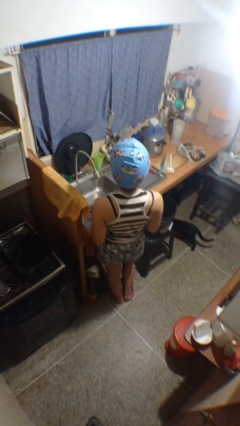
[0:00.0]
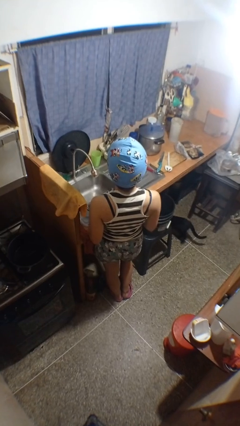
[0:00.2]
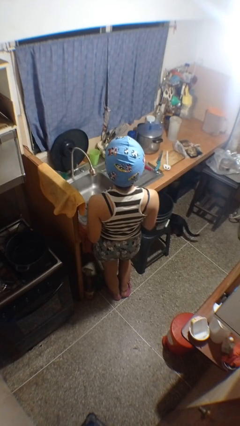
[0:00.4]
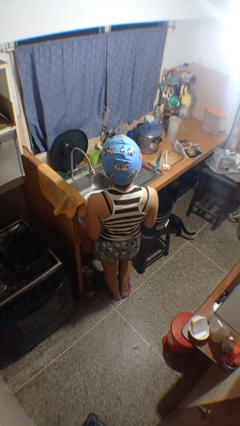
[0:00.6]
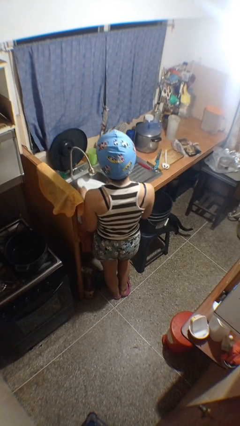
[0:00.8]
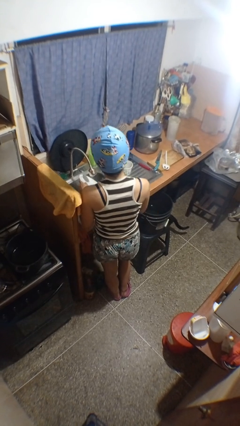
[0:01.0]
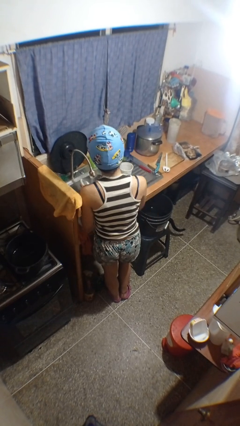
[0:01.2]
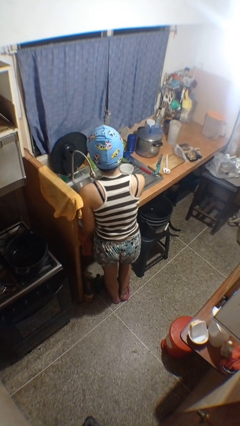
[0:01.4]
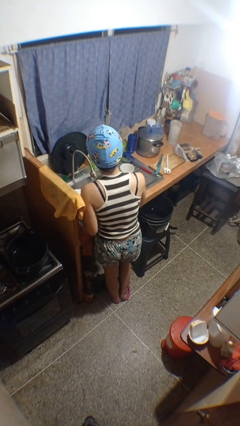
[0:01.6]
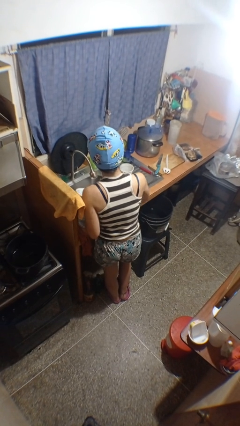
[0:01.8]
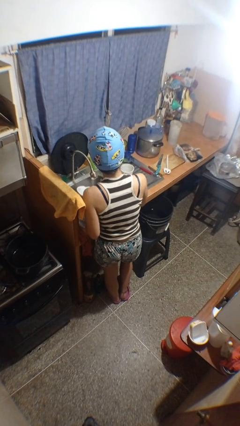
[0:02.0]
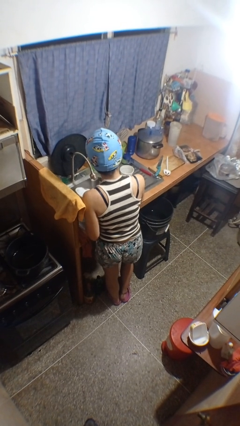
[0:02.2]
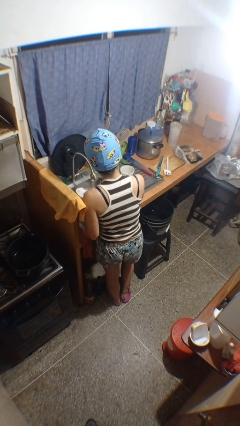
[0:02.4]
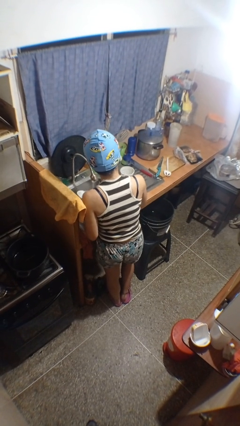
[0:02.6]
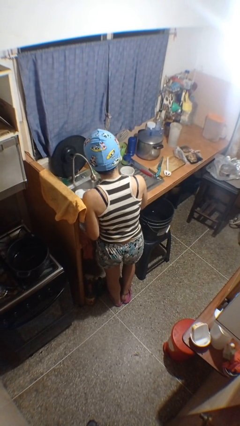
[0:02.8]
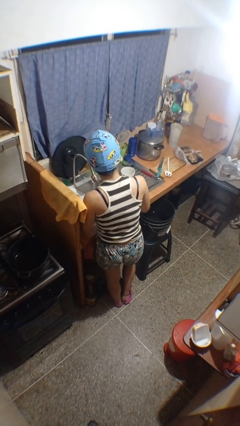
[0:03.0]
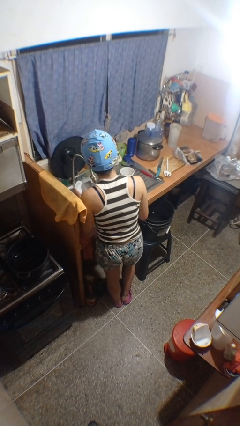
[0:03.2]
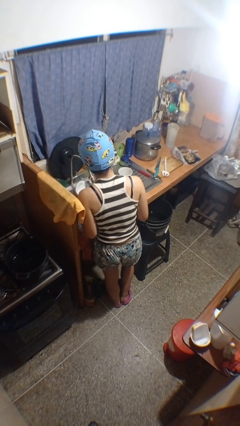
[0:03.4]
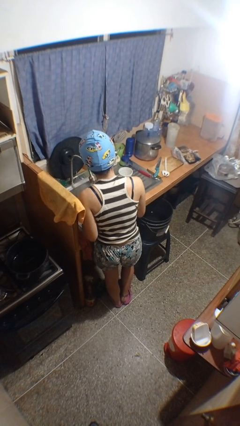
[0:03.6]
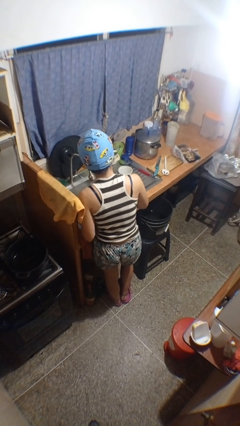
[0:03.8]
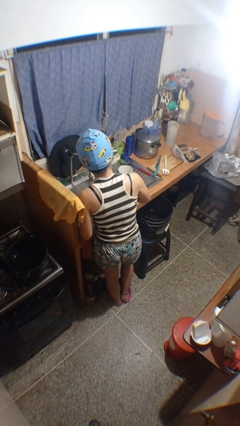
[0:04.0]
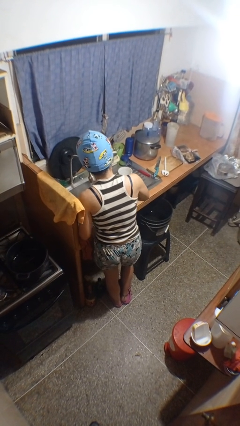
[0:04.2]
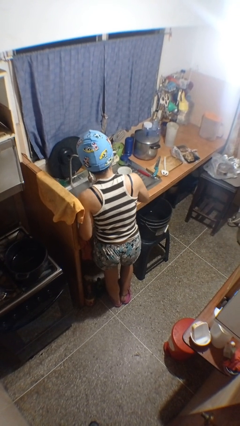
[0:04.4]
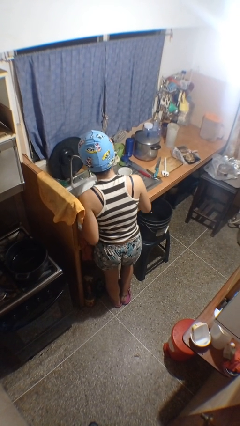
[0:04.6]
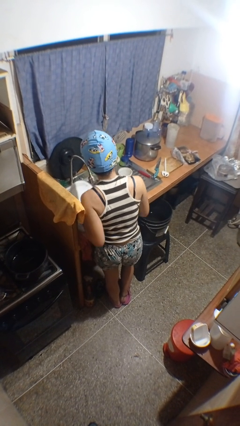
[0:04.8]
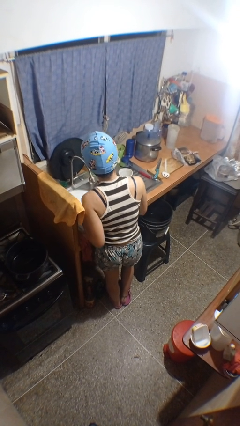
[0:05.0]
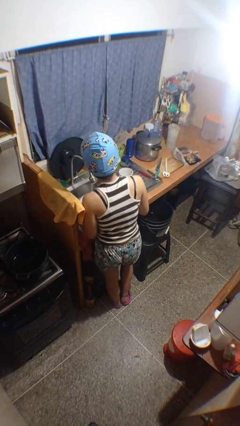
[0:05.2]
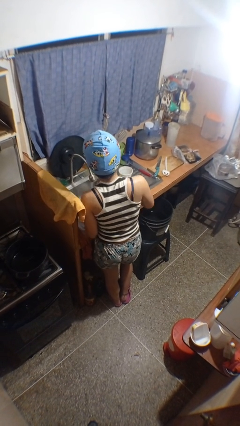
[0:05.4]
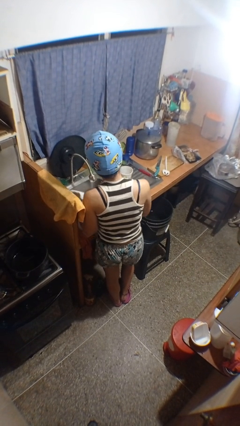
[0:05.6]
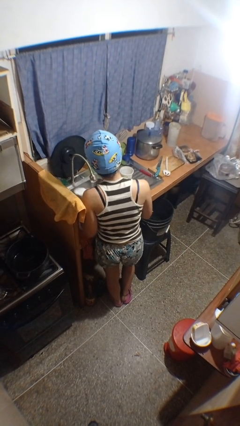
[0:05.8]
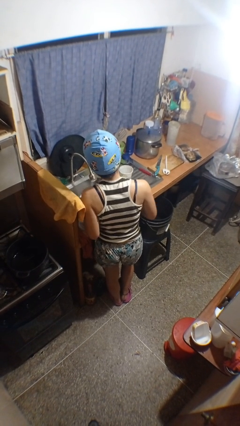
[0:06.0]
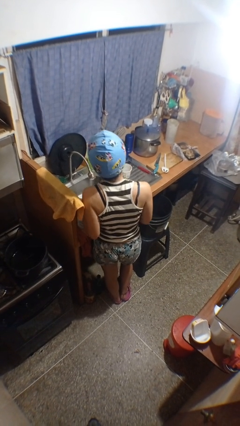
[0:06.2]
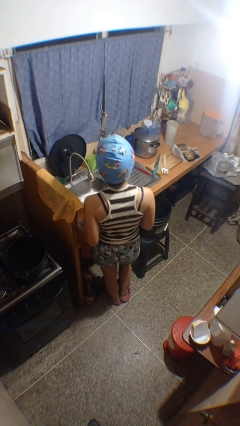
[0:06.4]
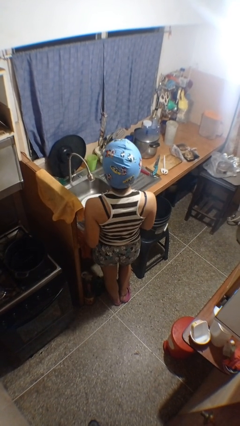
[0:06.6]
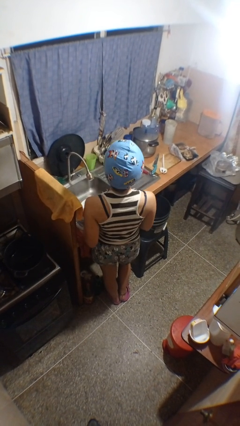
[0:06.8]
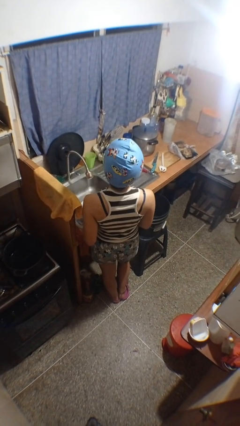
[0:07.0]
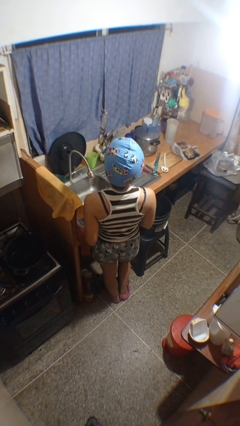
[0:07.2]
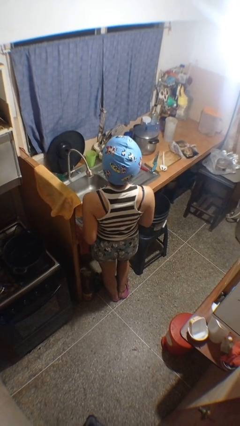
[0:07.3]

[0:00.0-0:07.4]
person washes dish

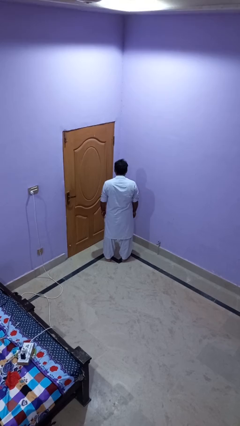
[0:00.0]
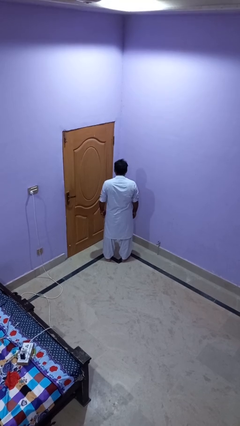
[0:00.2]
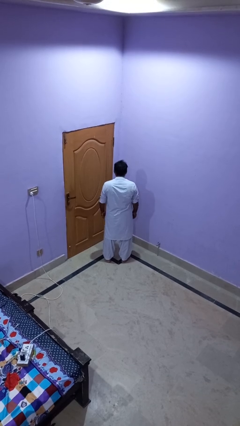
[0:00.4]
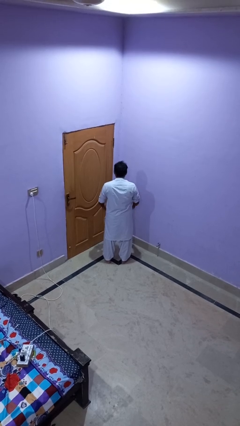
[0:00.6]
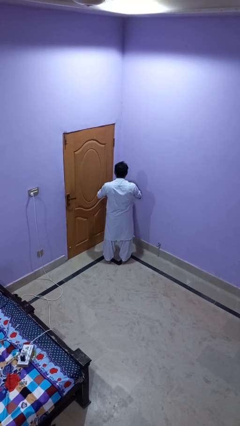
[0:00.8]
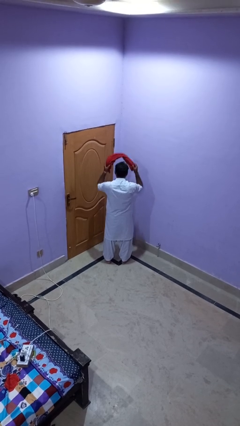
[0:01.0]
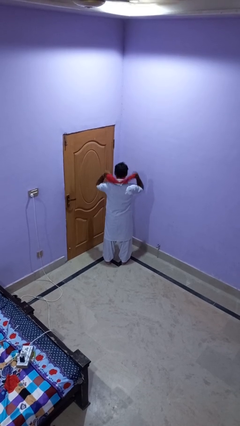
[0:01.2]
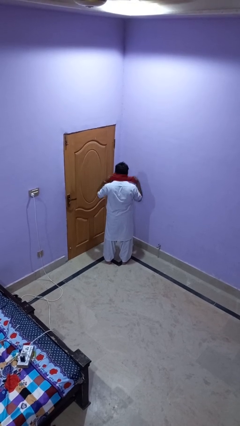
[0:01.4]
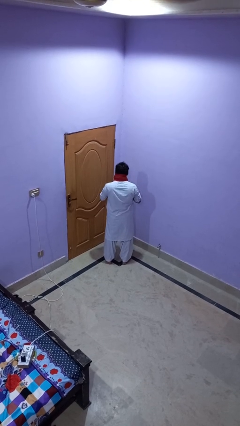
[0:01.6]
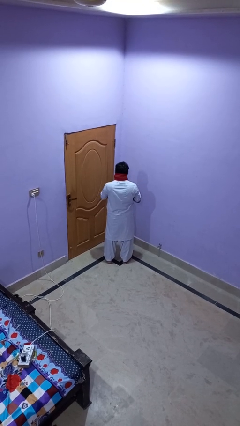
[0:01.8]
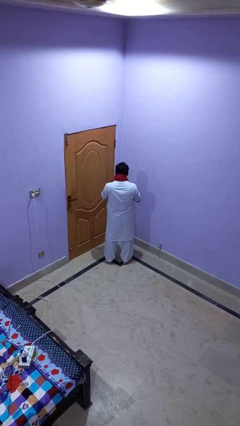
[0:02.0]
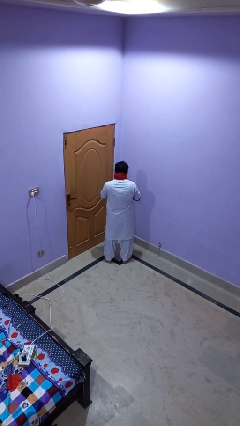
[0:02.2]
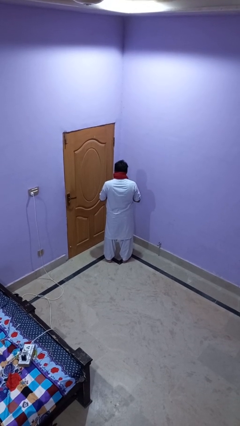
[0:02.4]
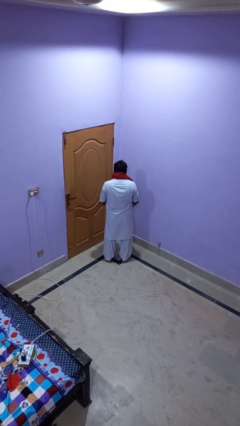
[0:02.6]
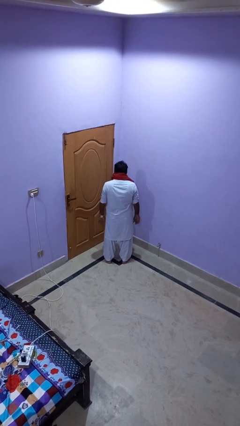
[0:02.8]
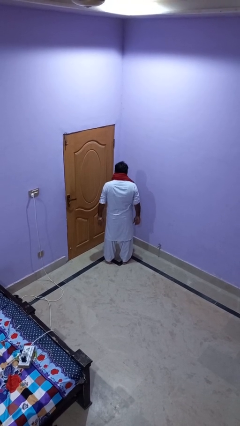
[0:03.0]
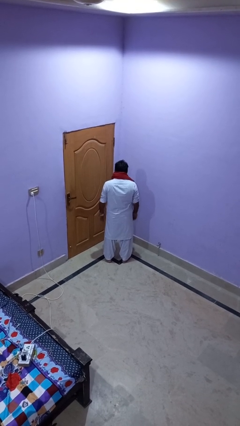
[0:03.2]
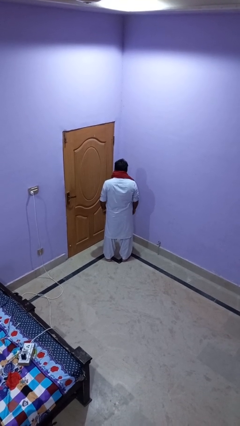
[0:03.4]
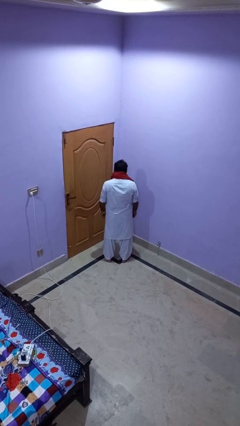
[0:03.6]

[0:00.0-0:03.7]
person puts on scarf

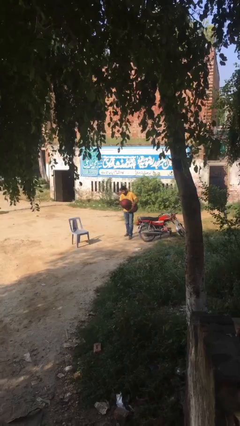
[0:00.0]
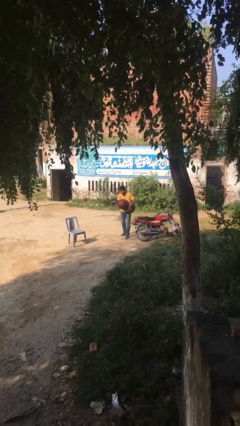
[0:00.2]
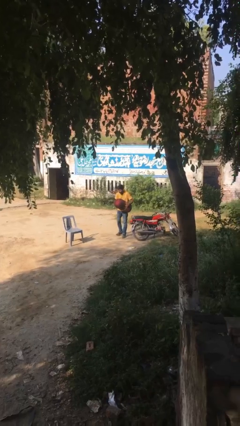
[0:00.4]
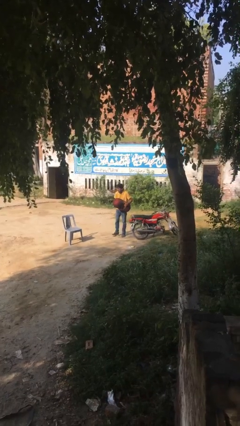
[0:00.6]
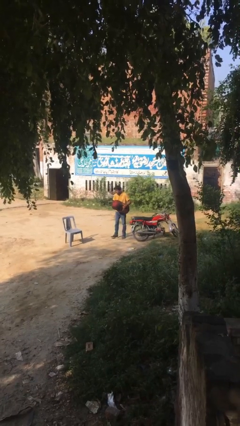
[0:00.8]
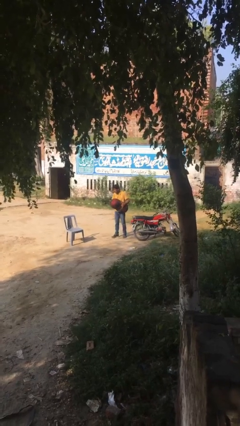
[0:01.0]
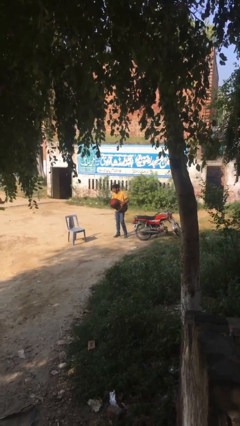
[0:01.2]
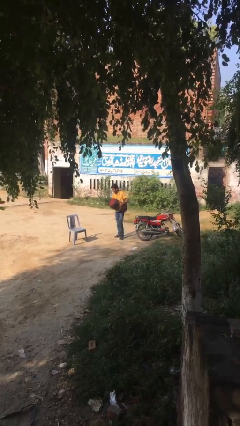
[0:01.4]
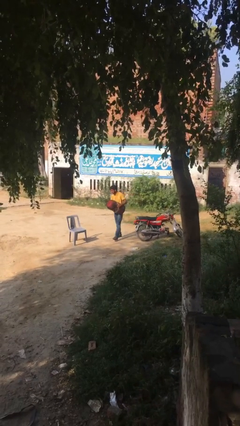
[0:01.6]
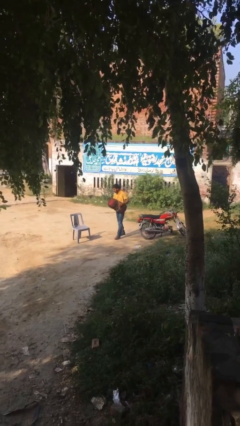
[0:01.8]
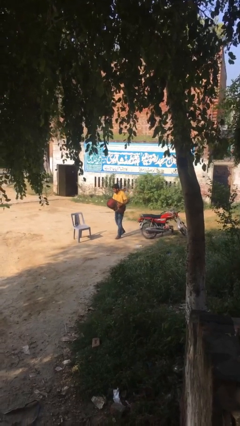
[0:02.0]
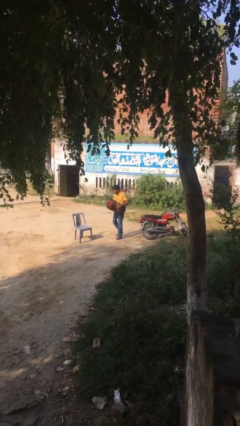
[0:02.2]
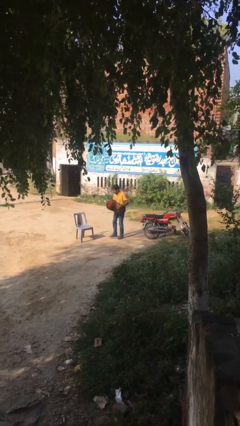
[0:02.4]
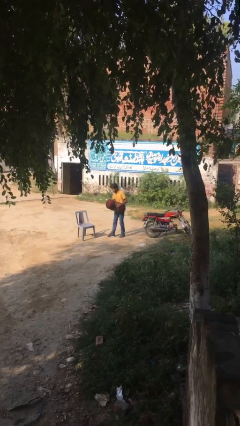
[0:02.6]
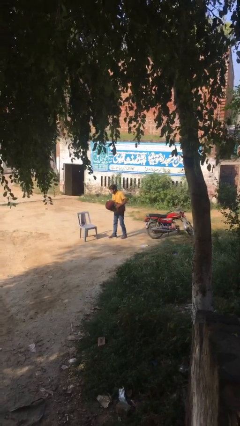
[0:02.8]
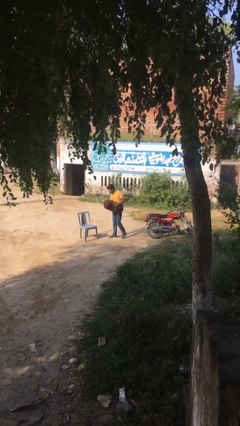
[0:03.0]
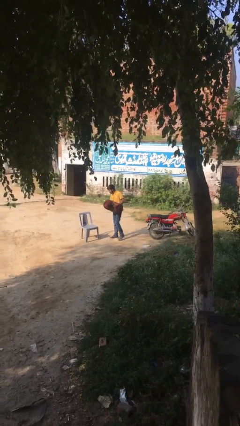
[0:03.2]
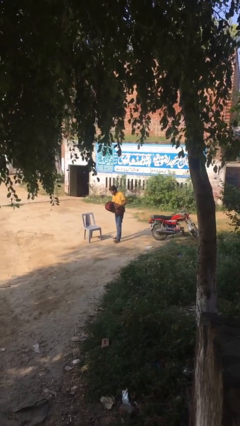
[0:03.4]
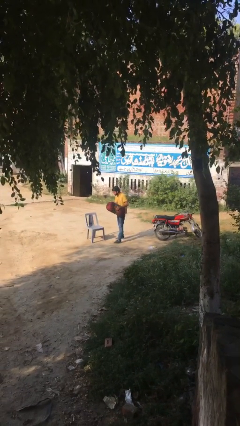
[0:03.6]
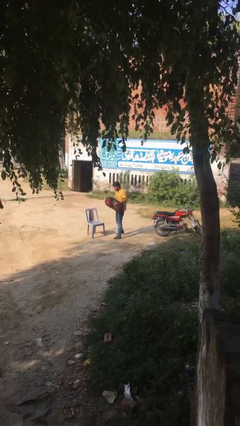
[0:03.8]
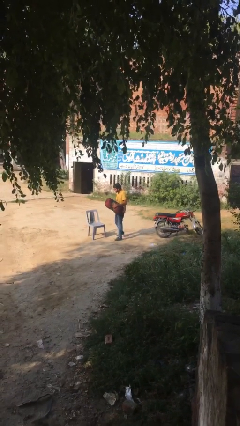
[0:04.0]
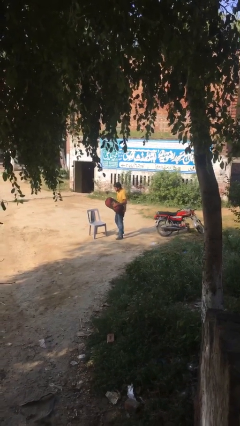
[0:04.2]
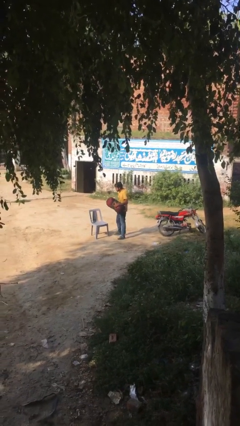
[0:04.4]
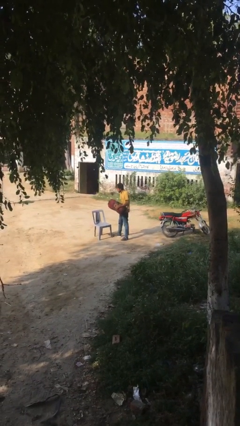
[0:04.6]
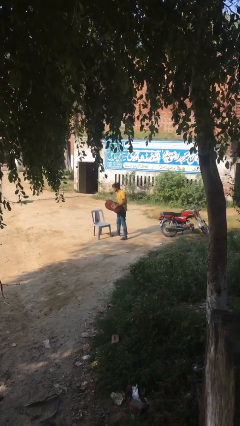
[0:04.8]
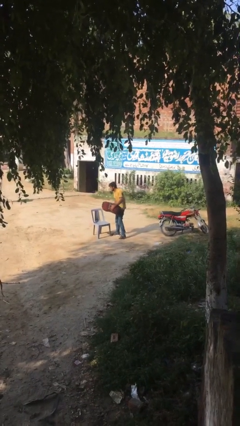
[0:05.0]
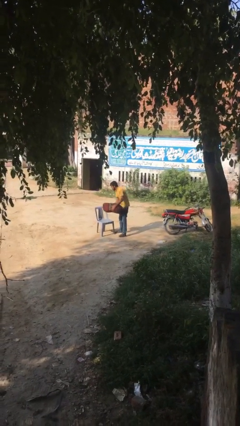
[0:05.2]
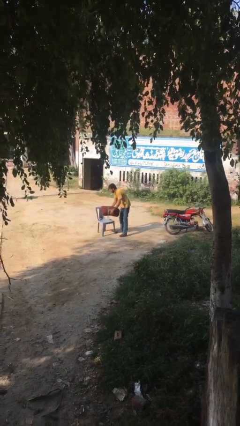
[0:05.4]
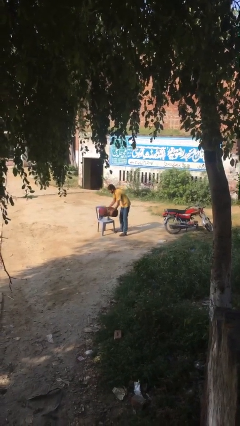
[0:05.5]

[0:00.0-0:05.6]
person carries heavy object

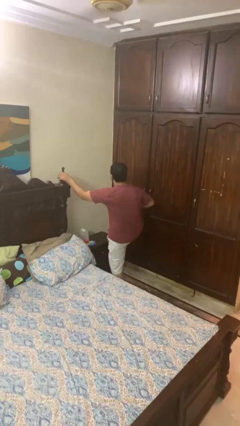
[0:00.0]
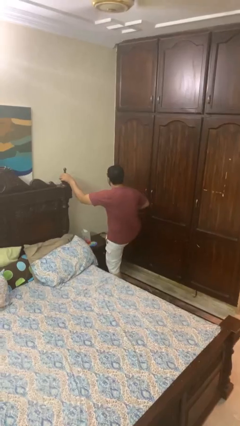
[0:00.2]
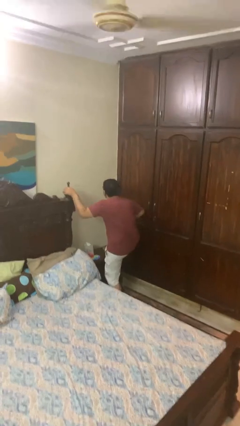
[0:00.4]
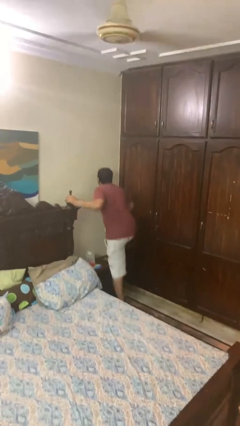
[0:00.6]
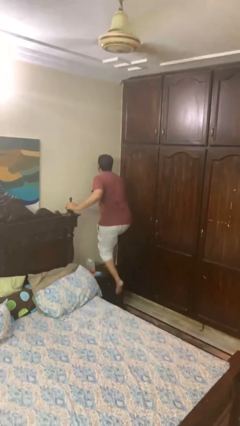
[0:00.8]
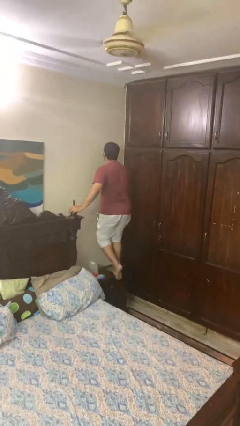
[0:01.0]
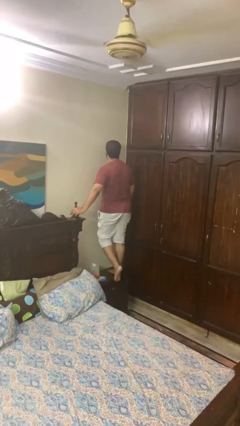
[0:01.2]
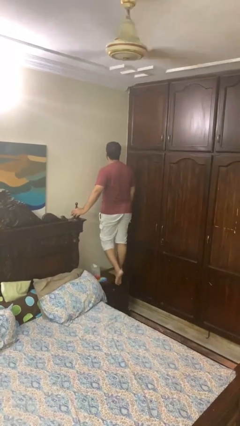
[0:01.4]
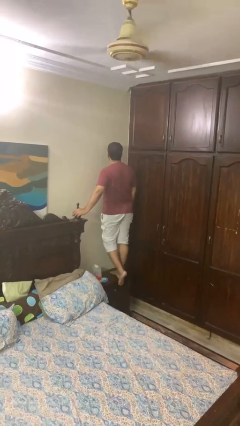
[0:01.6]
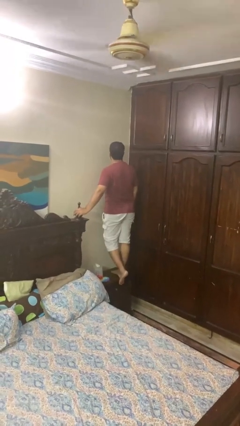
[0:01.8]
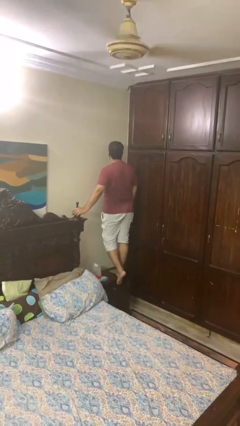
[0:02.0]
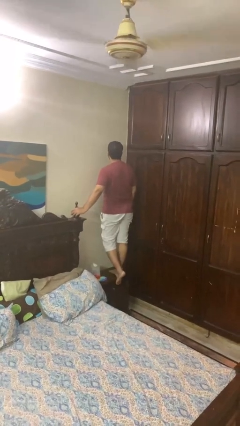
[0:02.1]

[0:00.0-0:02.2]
person climbs on table
